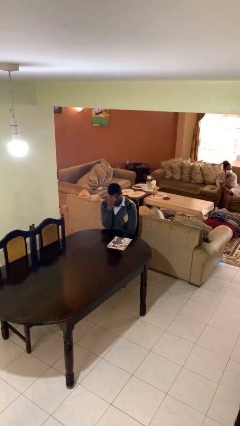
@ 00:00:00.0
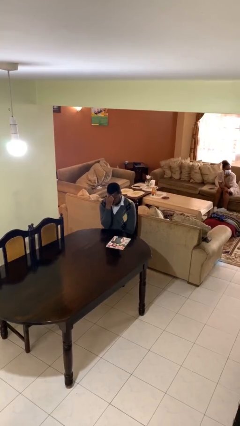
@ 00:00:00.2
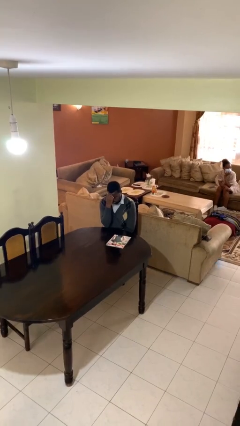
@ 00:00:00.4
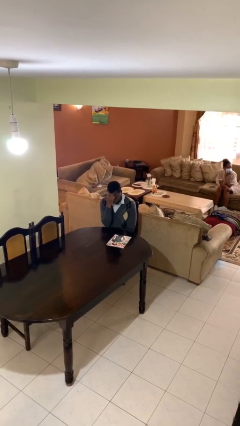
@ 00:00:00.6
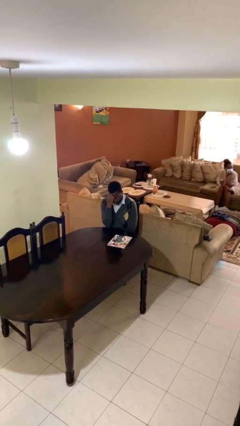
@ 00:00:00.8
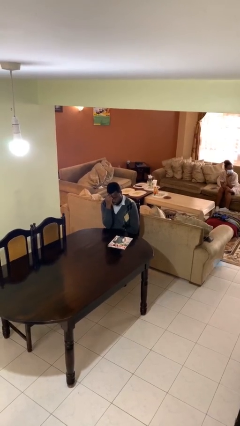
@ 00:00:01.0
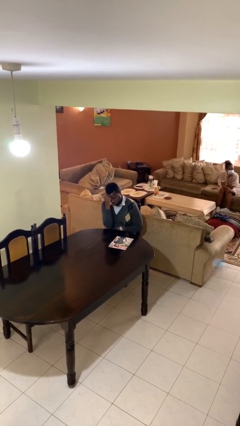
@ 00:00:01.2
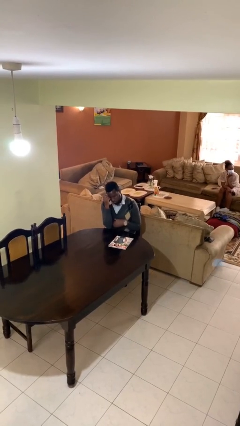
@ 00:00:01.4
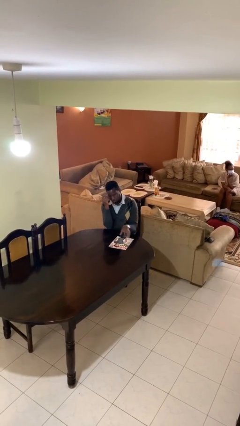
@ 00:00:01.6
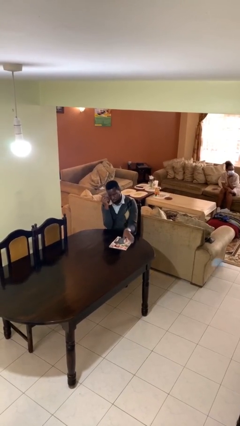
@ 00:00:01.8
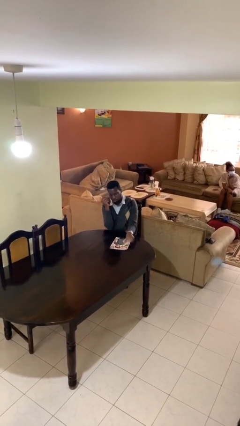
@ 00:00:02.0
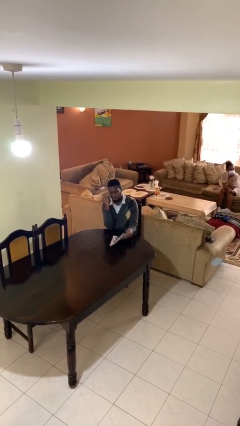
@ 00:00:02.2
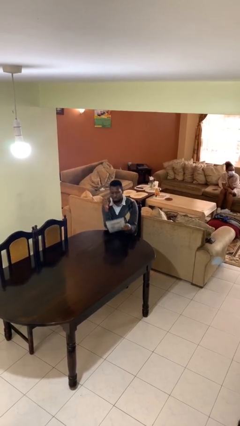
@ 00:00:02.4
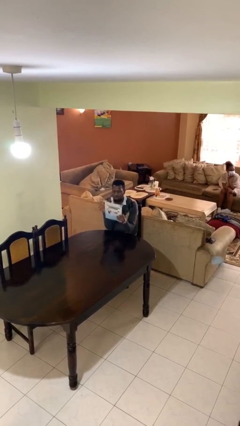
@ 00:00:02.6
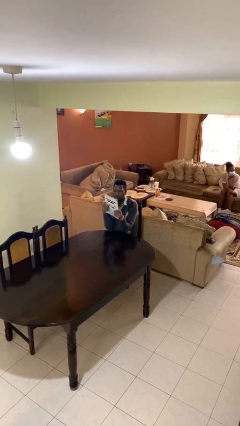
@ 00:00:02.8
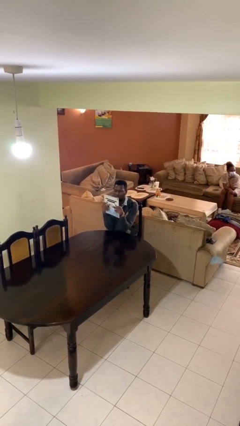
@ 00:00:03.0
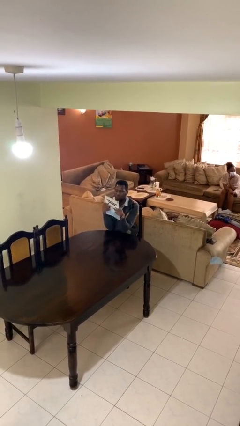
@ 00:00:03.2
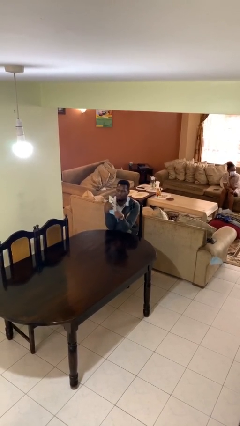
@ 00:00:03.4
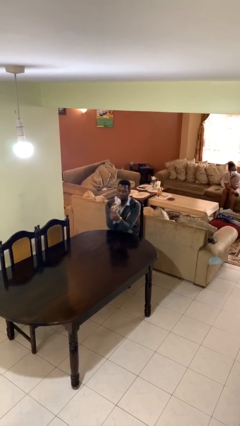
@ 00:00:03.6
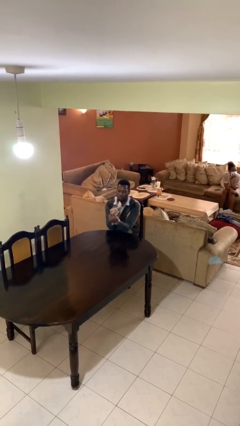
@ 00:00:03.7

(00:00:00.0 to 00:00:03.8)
person picks up object from table

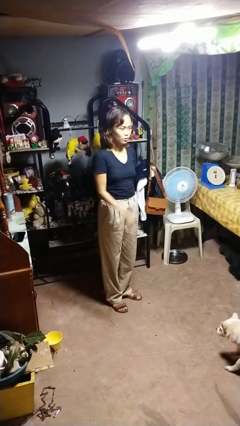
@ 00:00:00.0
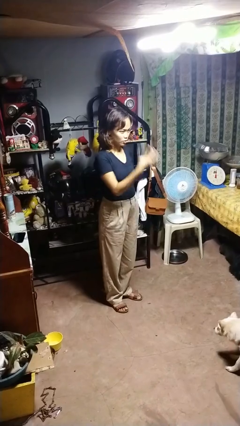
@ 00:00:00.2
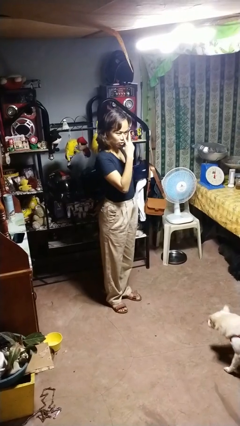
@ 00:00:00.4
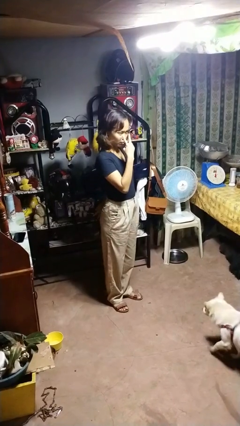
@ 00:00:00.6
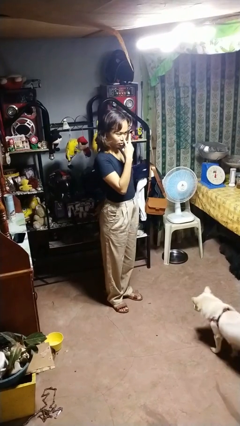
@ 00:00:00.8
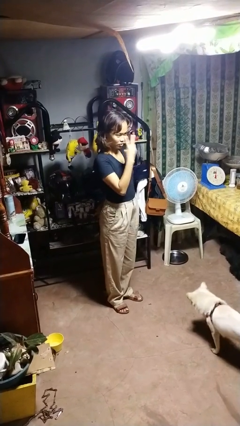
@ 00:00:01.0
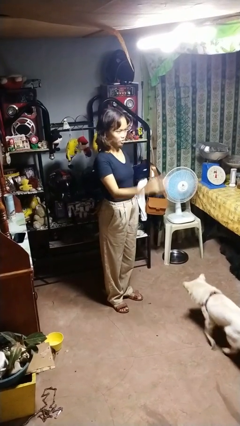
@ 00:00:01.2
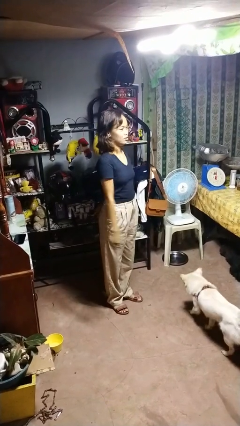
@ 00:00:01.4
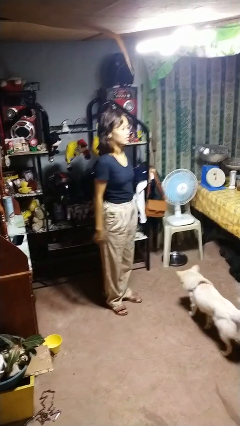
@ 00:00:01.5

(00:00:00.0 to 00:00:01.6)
person gestures watch closely

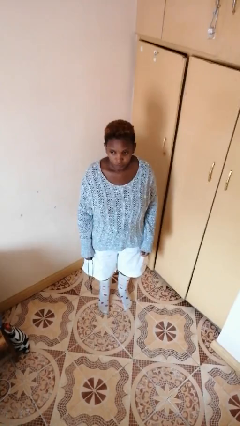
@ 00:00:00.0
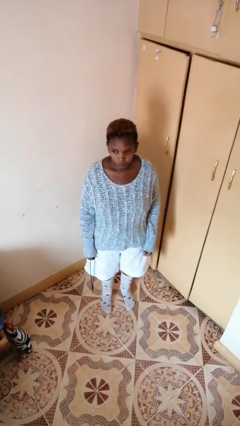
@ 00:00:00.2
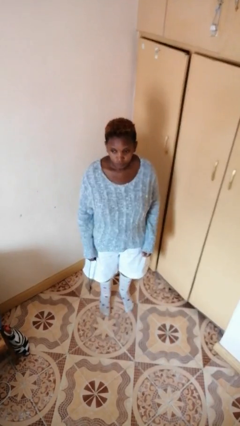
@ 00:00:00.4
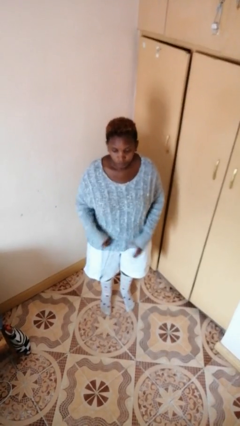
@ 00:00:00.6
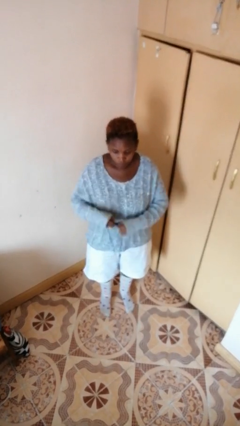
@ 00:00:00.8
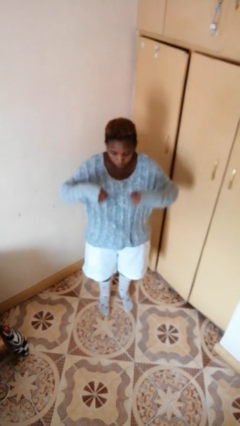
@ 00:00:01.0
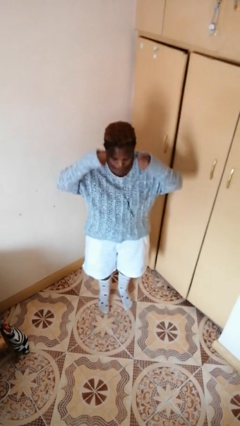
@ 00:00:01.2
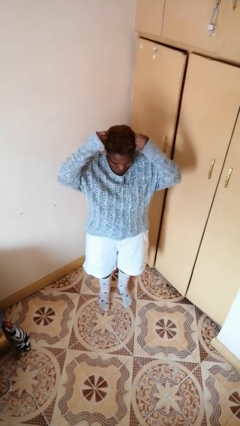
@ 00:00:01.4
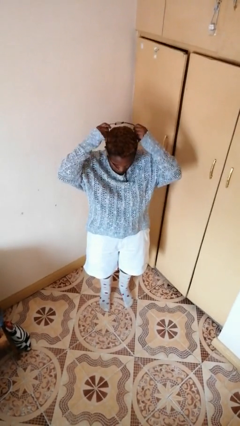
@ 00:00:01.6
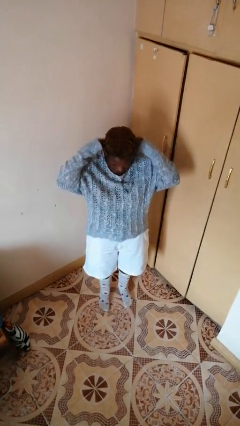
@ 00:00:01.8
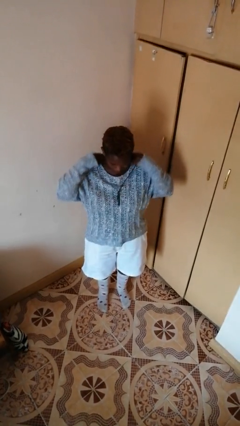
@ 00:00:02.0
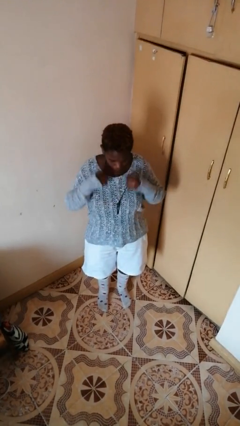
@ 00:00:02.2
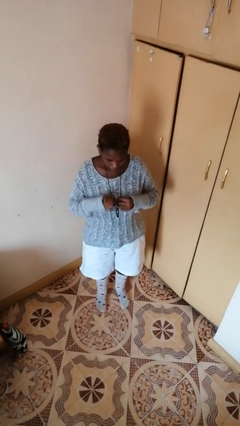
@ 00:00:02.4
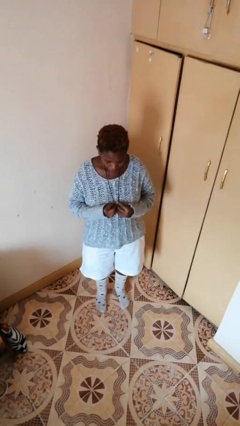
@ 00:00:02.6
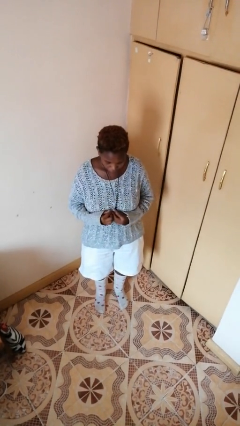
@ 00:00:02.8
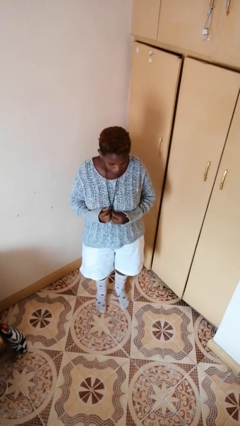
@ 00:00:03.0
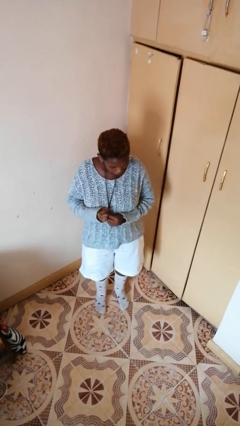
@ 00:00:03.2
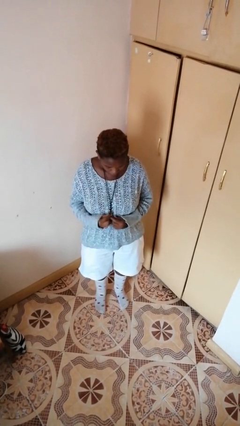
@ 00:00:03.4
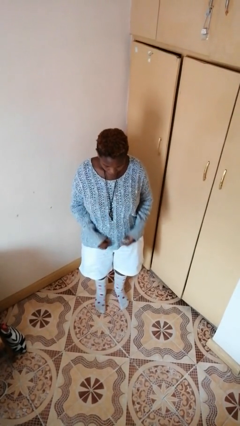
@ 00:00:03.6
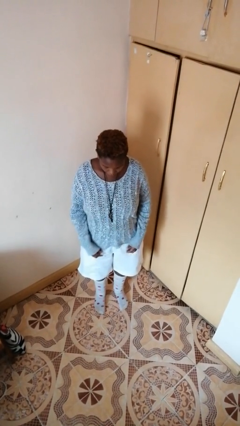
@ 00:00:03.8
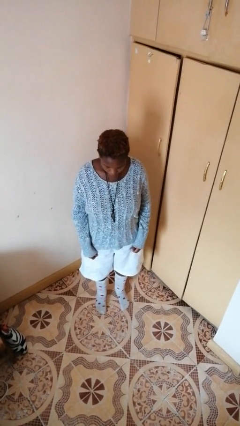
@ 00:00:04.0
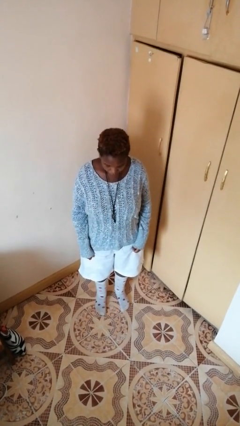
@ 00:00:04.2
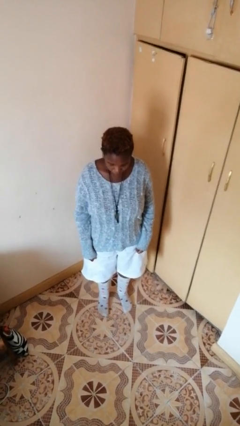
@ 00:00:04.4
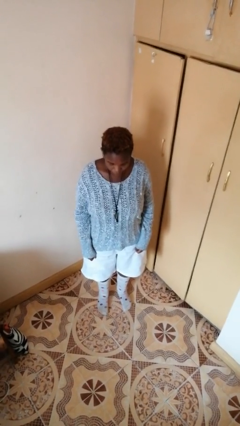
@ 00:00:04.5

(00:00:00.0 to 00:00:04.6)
person puts on necklace

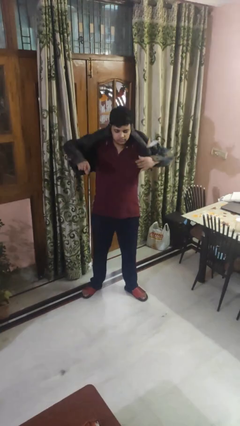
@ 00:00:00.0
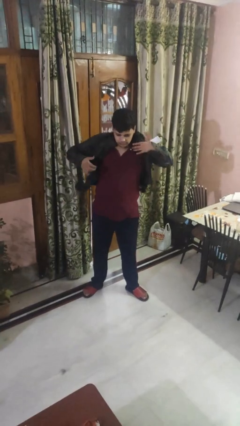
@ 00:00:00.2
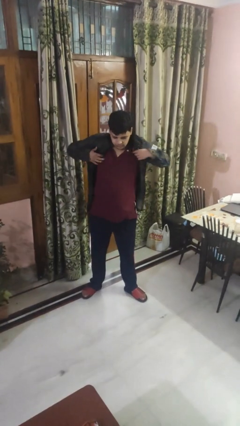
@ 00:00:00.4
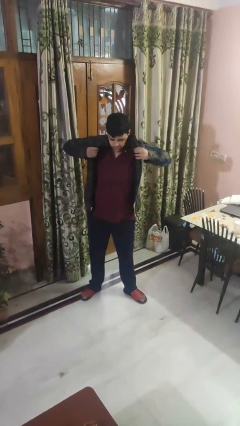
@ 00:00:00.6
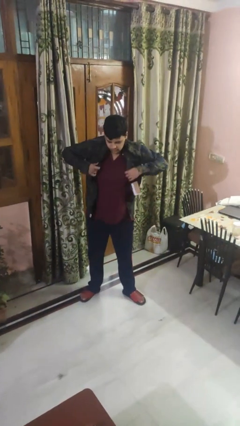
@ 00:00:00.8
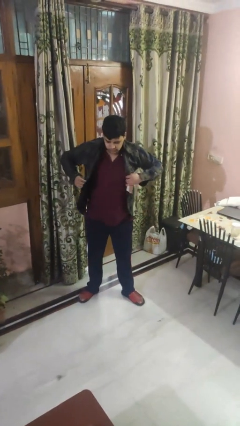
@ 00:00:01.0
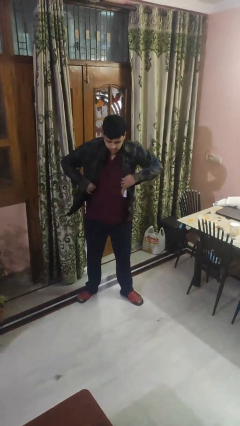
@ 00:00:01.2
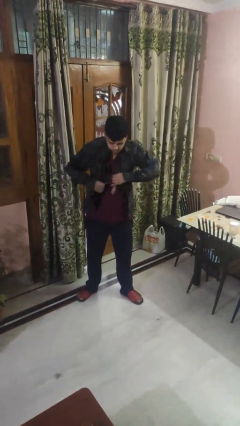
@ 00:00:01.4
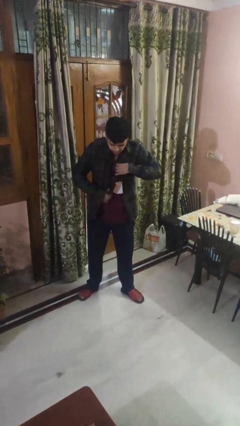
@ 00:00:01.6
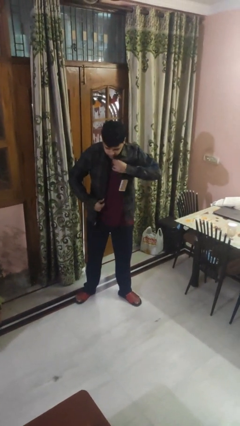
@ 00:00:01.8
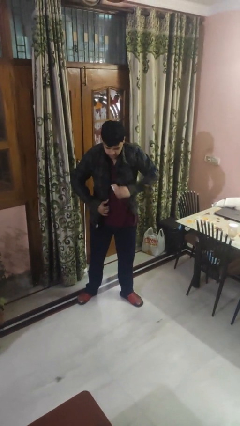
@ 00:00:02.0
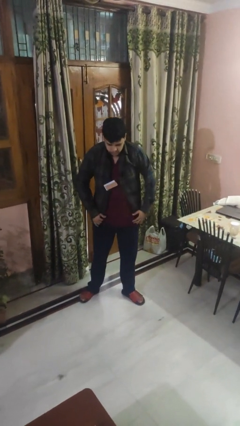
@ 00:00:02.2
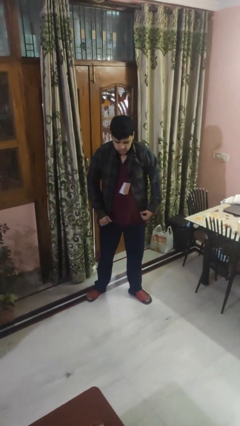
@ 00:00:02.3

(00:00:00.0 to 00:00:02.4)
person puts on shirt

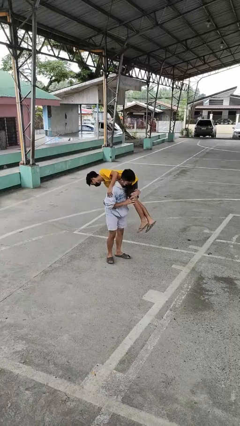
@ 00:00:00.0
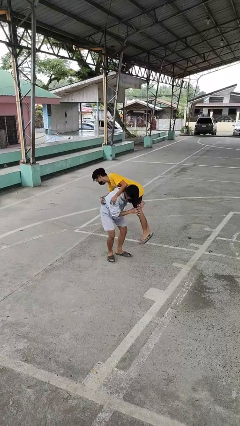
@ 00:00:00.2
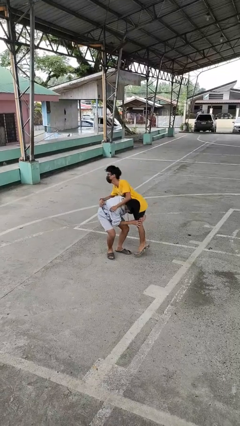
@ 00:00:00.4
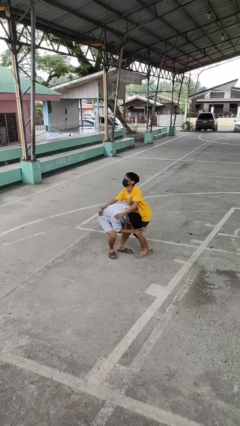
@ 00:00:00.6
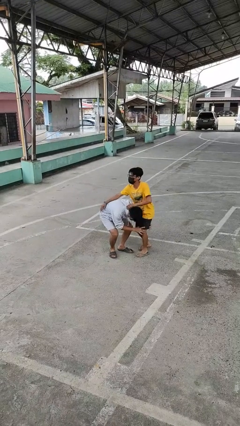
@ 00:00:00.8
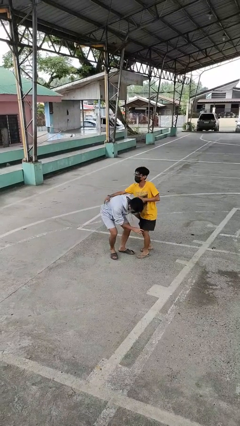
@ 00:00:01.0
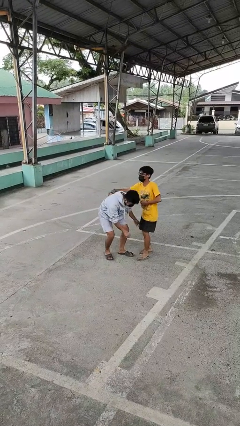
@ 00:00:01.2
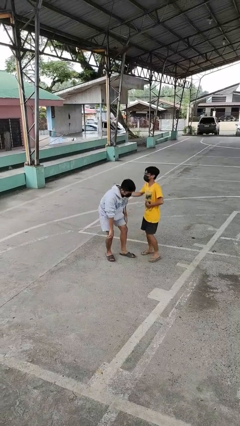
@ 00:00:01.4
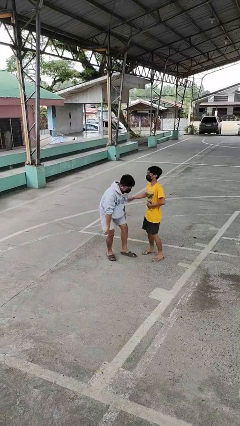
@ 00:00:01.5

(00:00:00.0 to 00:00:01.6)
person puts down person

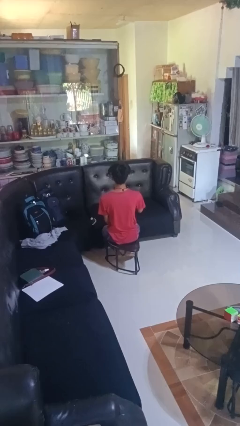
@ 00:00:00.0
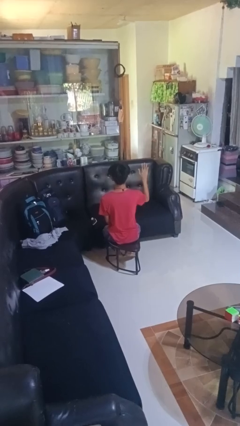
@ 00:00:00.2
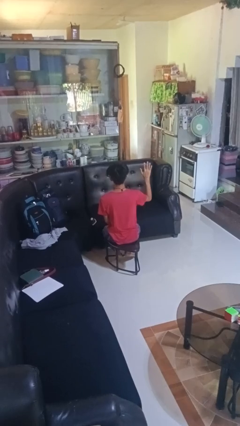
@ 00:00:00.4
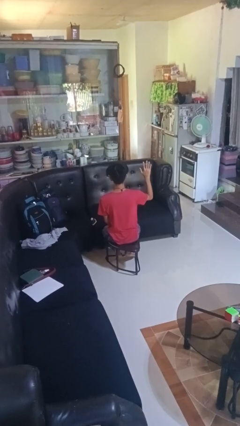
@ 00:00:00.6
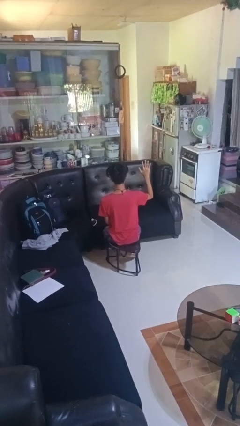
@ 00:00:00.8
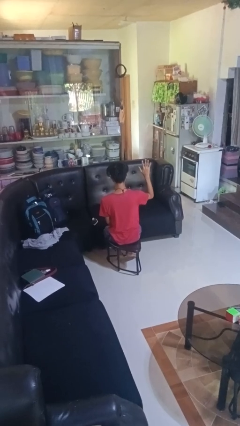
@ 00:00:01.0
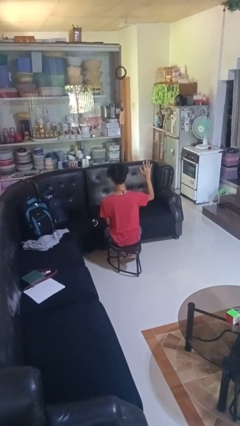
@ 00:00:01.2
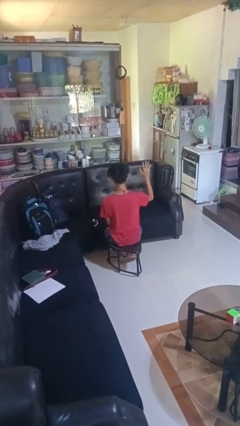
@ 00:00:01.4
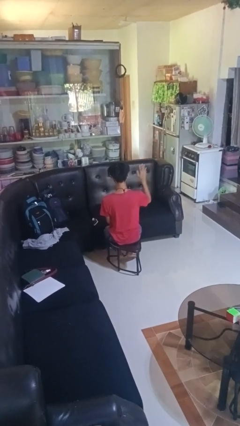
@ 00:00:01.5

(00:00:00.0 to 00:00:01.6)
person gestures number five

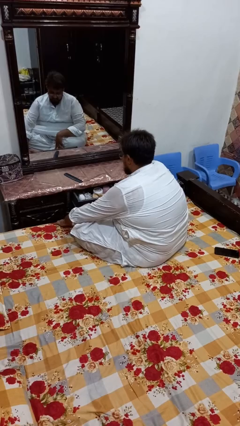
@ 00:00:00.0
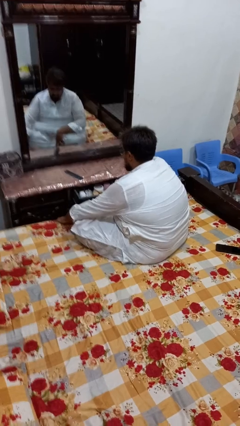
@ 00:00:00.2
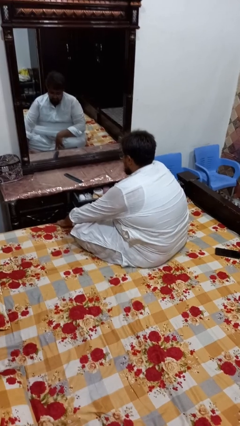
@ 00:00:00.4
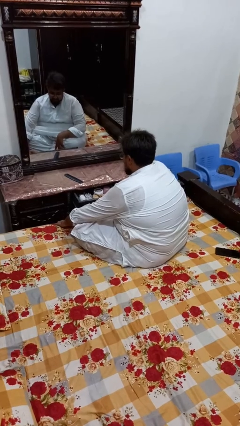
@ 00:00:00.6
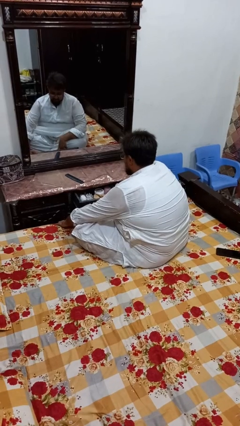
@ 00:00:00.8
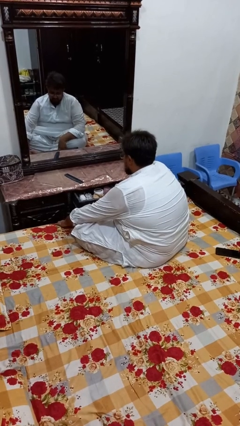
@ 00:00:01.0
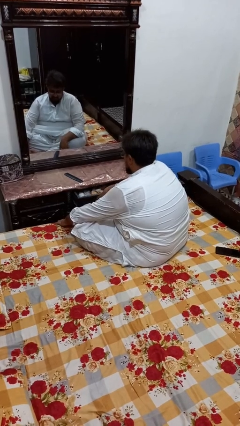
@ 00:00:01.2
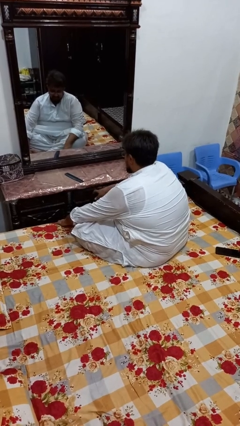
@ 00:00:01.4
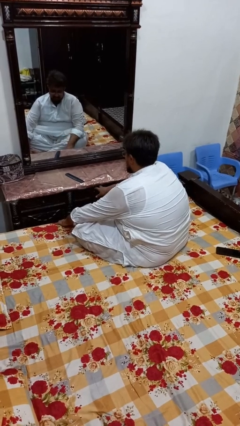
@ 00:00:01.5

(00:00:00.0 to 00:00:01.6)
person closes dresser drawer
